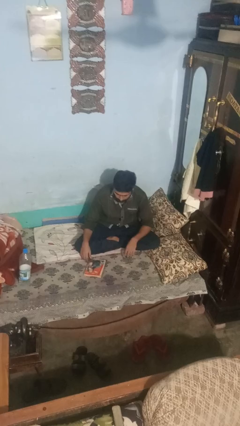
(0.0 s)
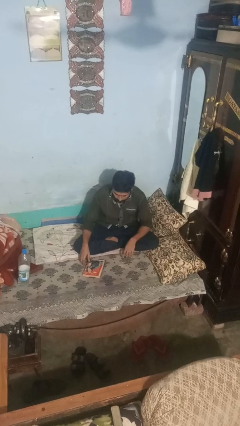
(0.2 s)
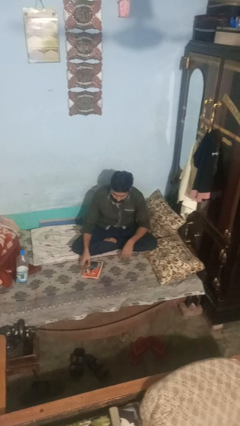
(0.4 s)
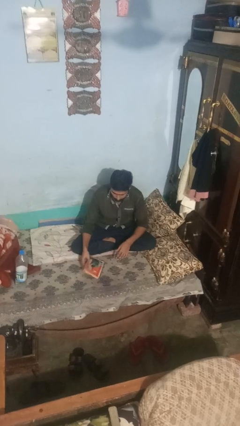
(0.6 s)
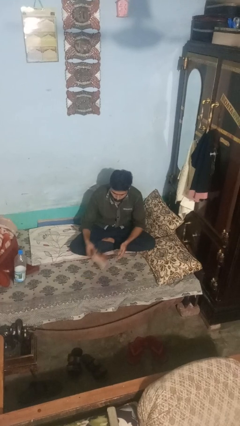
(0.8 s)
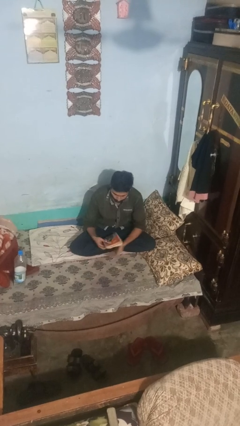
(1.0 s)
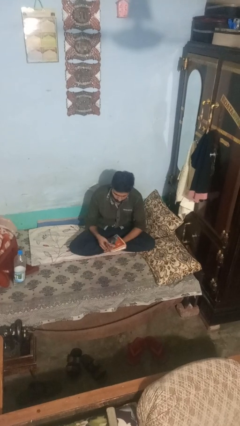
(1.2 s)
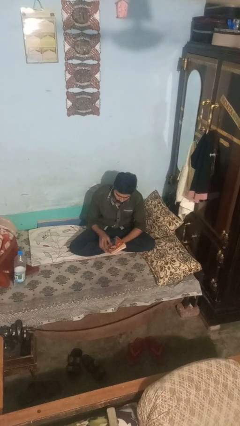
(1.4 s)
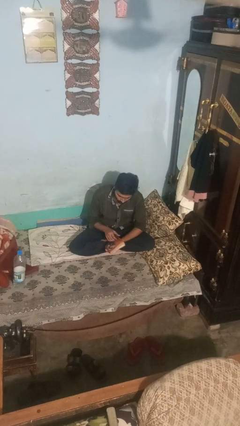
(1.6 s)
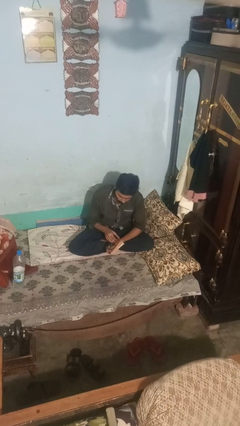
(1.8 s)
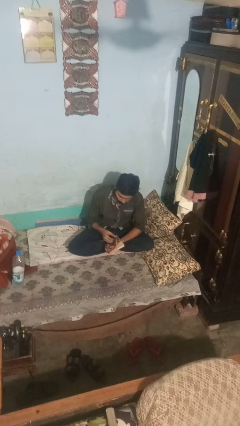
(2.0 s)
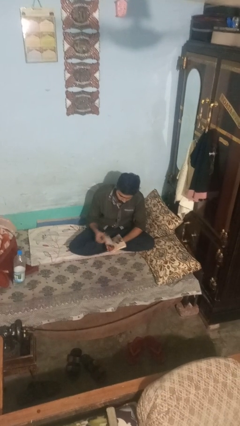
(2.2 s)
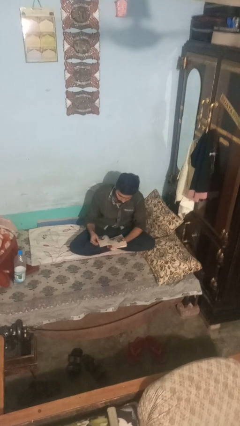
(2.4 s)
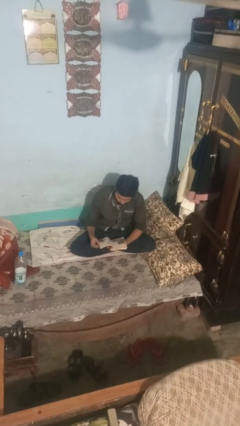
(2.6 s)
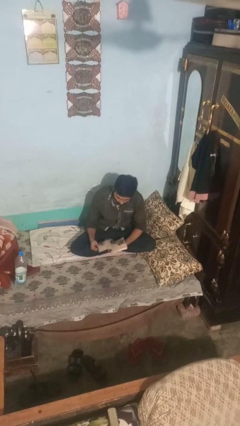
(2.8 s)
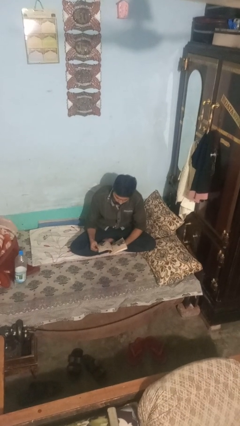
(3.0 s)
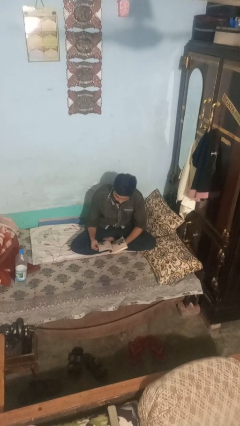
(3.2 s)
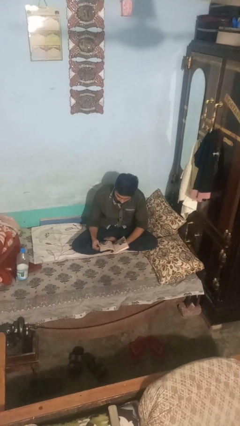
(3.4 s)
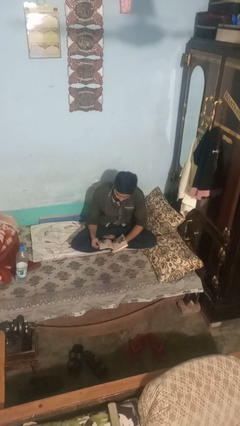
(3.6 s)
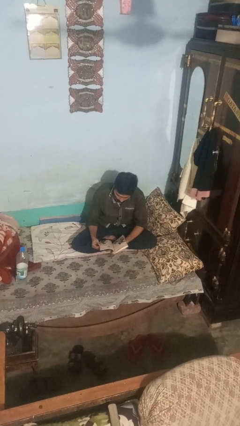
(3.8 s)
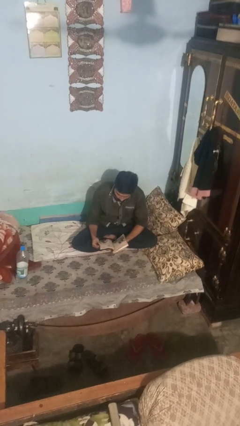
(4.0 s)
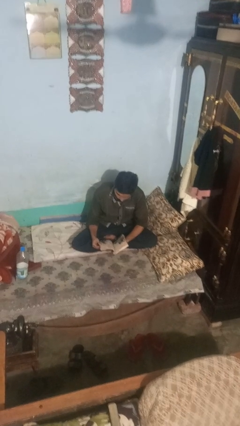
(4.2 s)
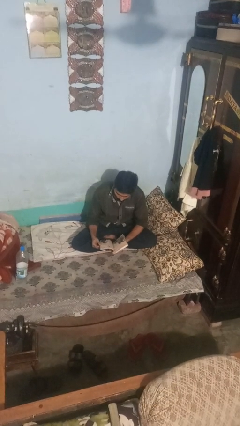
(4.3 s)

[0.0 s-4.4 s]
person reads magazine

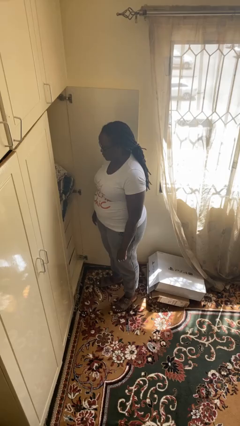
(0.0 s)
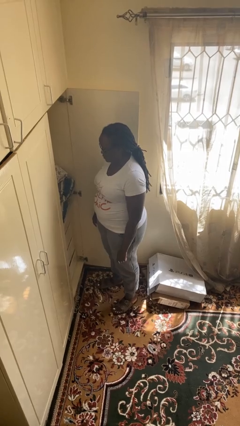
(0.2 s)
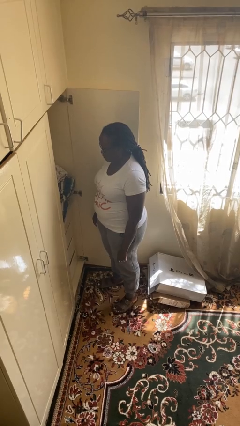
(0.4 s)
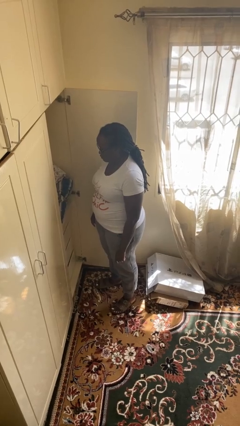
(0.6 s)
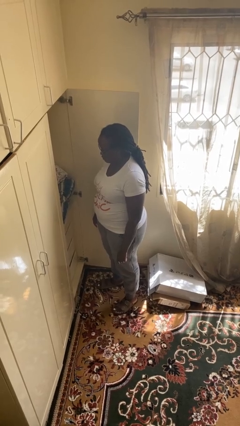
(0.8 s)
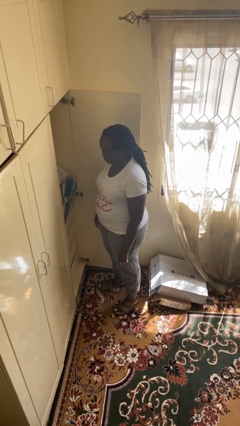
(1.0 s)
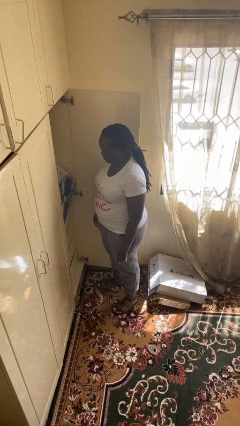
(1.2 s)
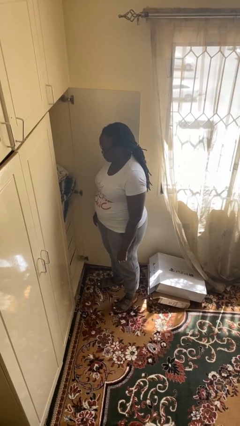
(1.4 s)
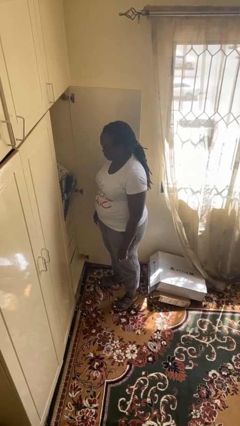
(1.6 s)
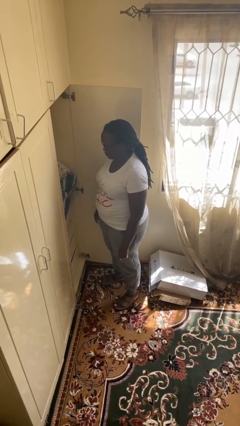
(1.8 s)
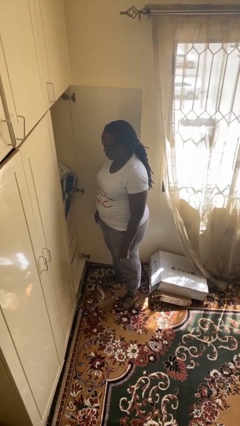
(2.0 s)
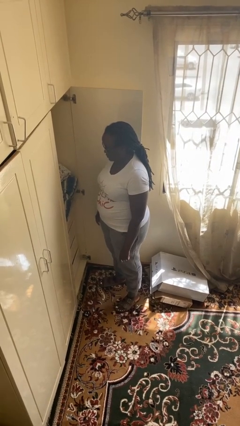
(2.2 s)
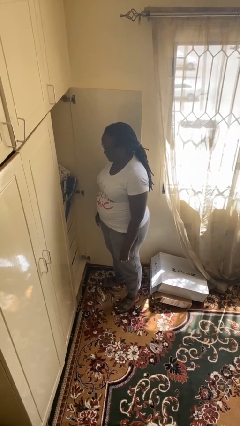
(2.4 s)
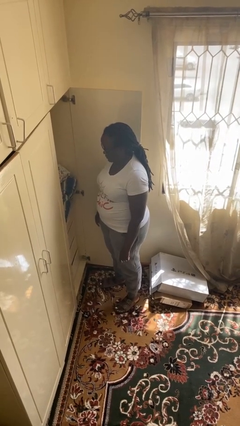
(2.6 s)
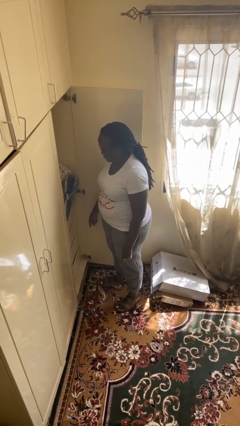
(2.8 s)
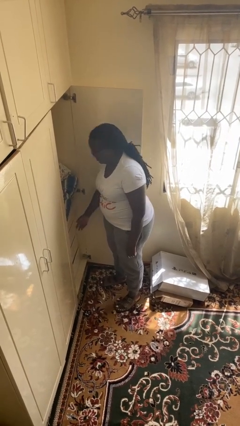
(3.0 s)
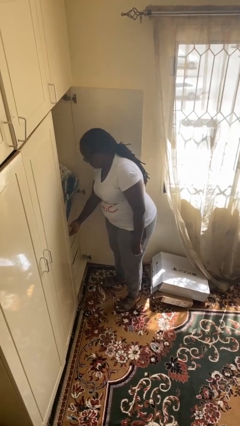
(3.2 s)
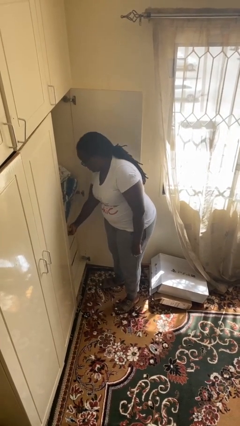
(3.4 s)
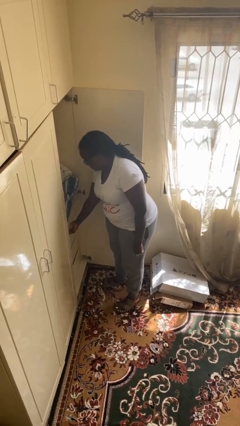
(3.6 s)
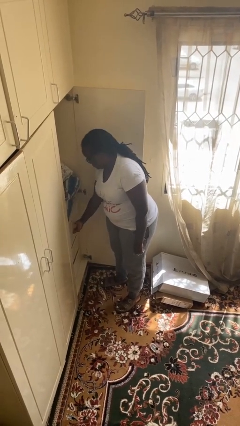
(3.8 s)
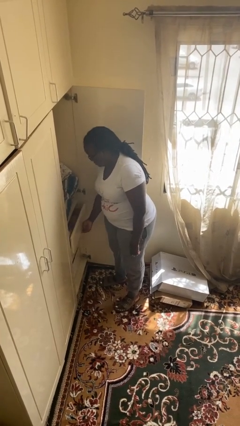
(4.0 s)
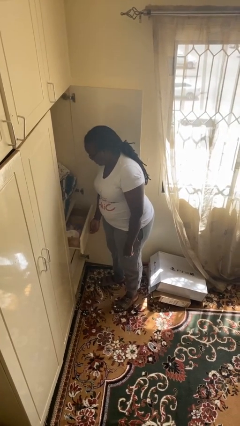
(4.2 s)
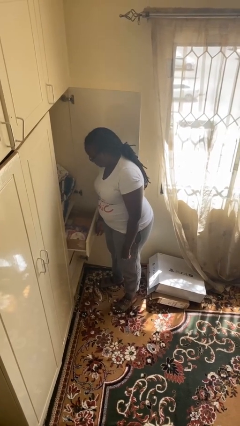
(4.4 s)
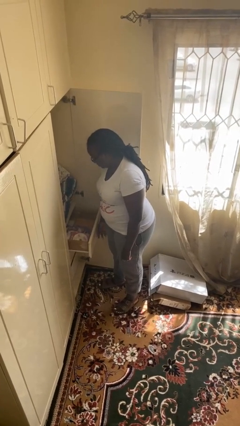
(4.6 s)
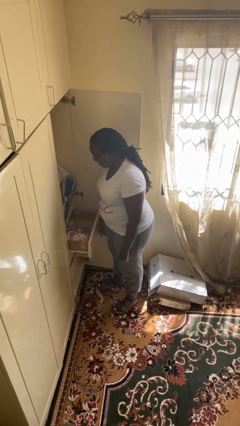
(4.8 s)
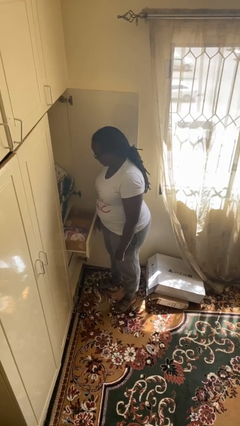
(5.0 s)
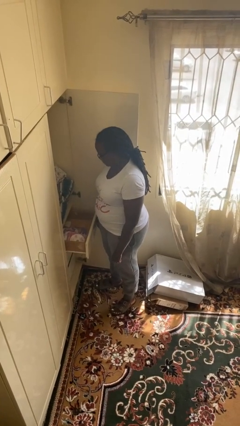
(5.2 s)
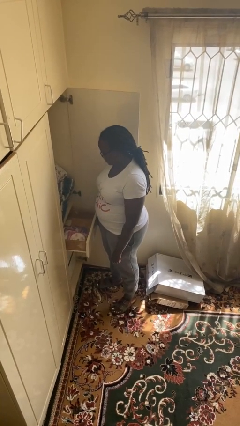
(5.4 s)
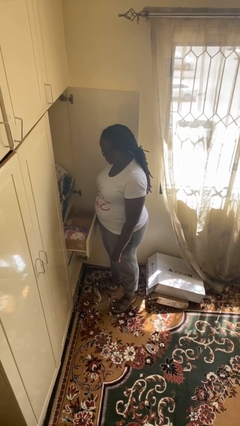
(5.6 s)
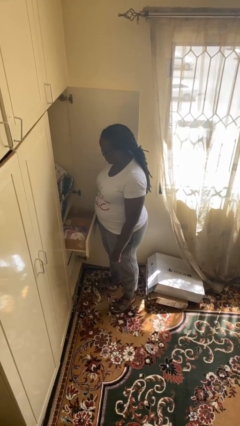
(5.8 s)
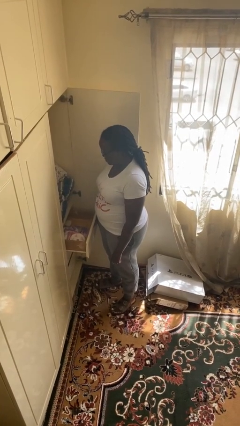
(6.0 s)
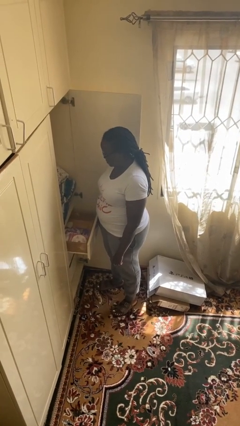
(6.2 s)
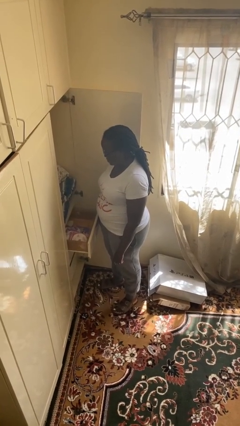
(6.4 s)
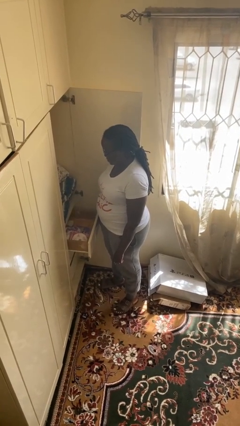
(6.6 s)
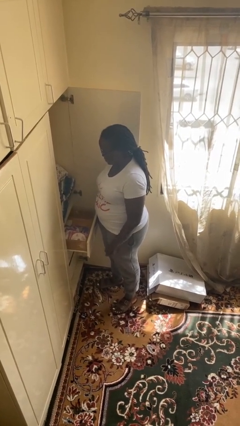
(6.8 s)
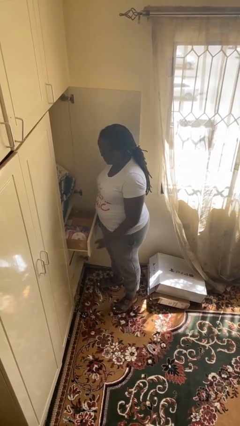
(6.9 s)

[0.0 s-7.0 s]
person opens dresser drawer

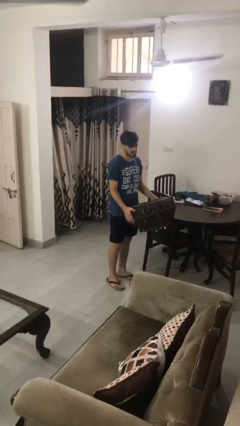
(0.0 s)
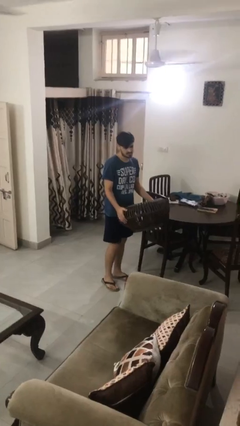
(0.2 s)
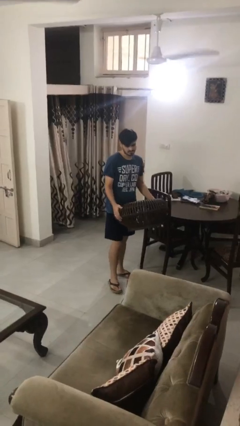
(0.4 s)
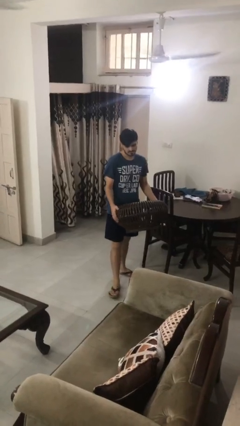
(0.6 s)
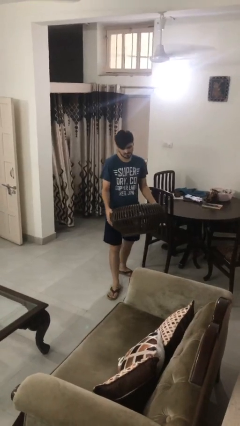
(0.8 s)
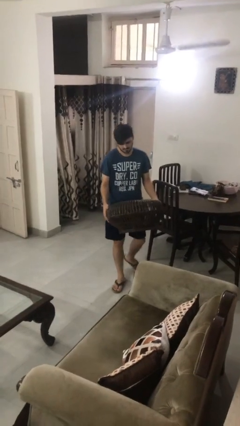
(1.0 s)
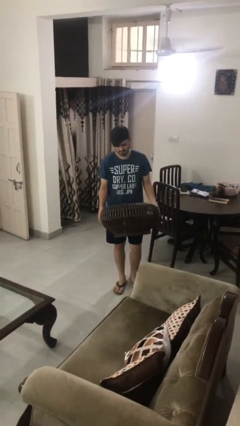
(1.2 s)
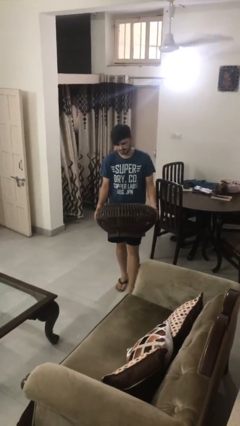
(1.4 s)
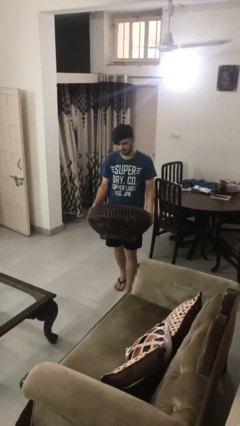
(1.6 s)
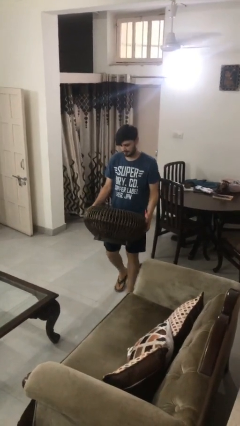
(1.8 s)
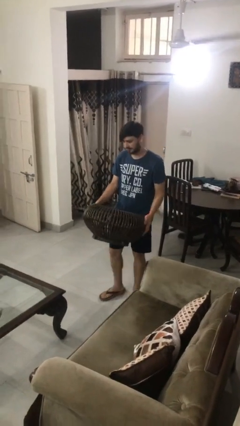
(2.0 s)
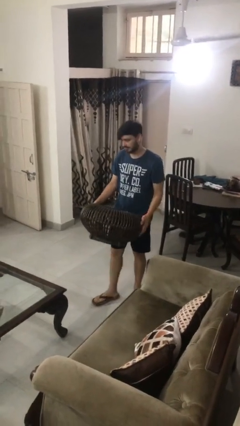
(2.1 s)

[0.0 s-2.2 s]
person carries furniture

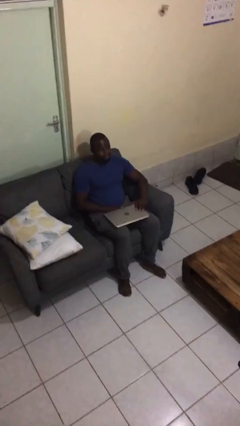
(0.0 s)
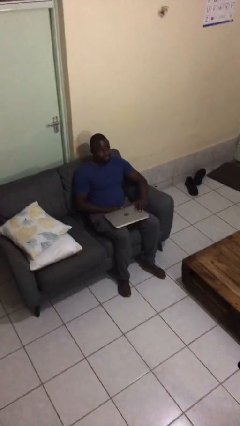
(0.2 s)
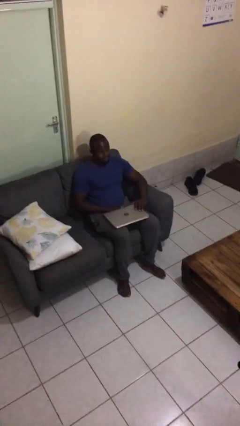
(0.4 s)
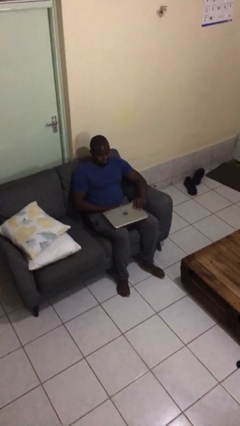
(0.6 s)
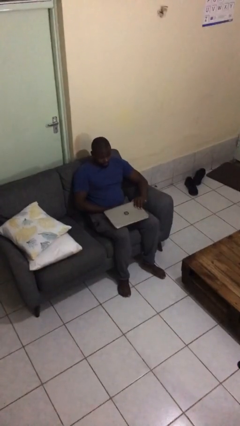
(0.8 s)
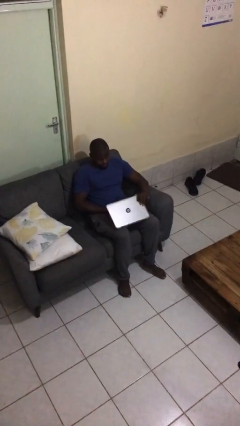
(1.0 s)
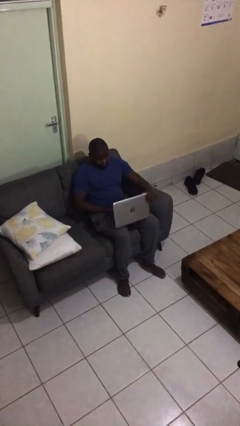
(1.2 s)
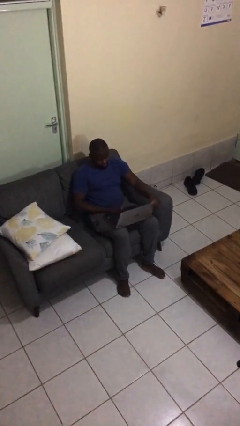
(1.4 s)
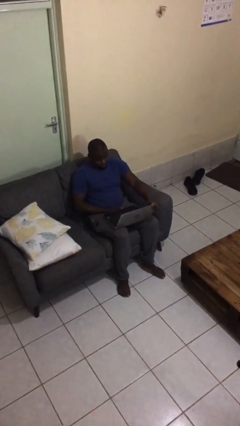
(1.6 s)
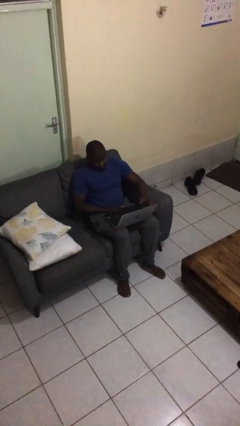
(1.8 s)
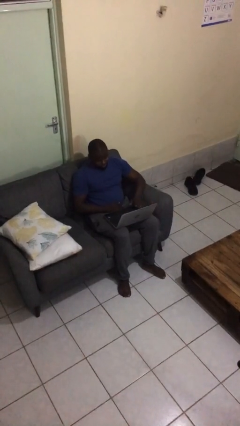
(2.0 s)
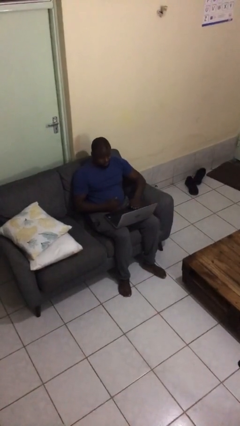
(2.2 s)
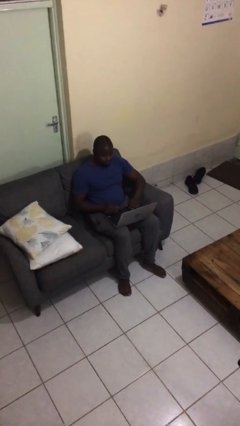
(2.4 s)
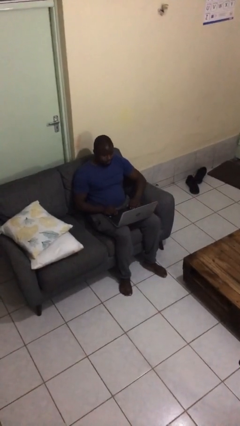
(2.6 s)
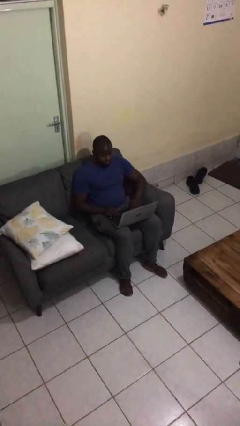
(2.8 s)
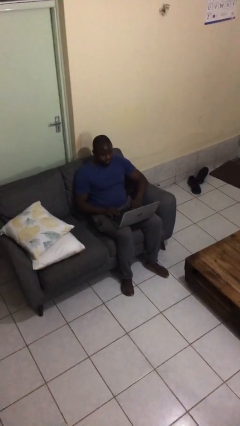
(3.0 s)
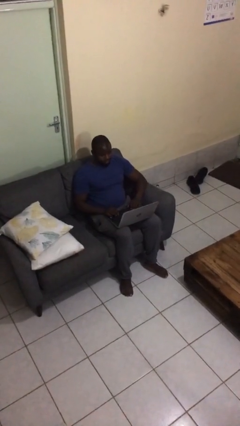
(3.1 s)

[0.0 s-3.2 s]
person opens laptop

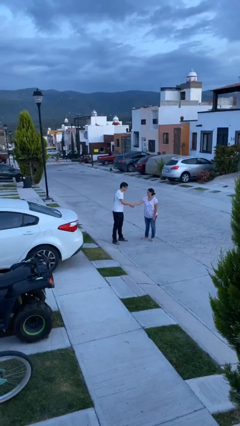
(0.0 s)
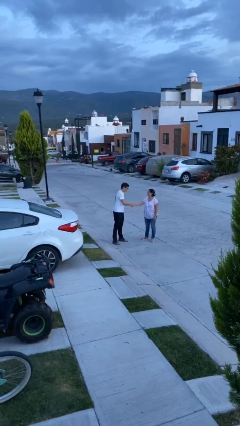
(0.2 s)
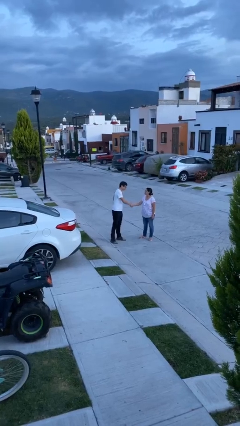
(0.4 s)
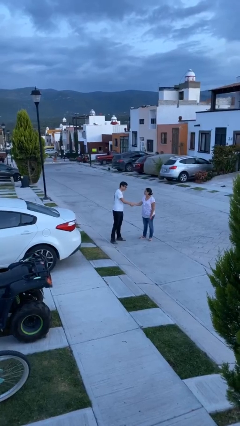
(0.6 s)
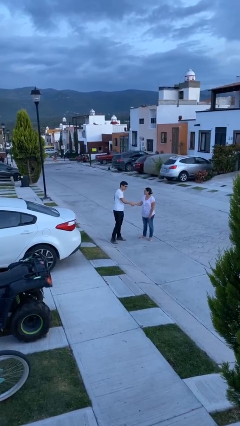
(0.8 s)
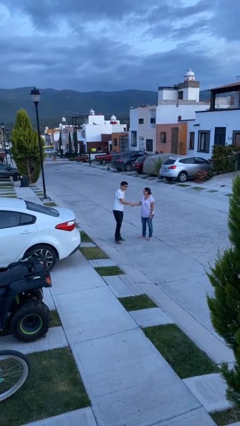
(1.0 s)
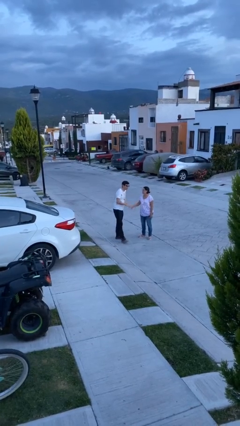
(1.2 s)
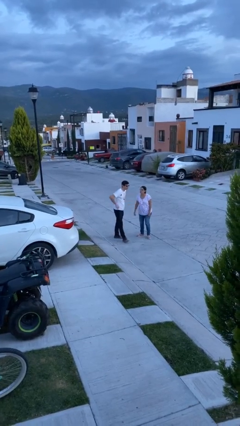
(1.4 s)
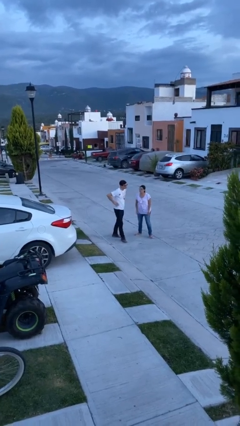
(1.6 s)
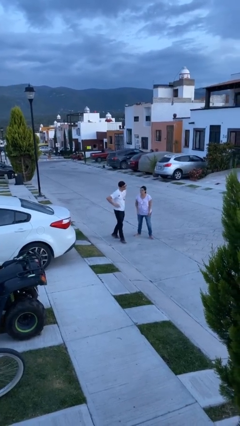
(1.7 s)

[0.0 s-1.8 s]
person shakes hand
